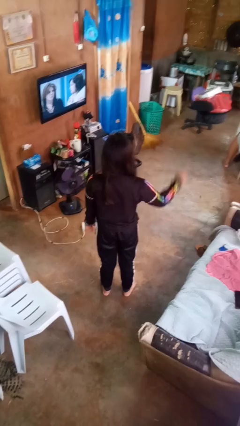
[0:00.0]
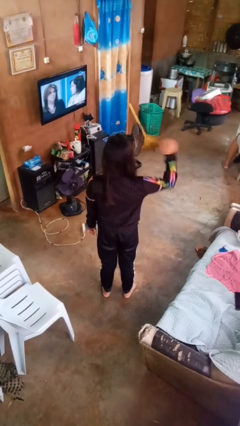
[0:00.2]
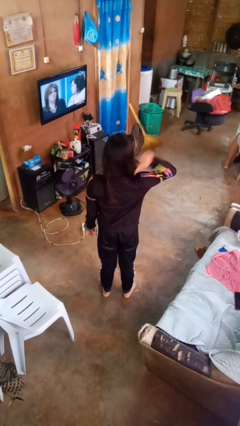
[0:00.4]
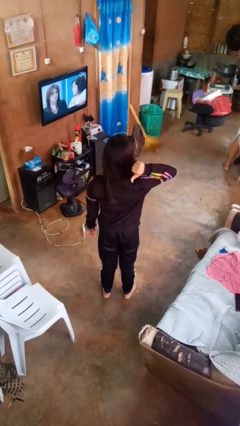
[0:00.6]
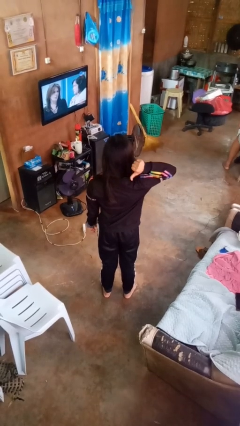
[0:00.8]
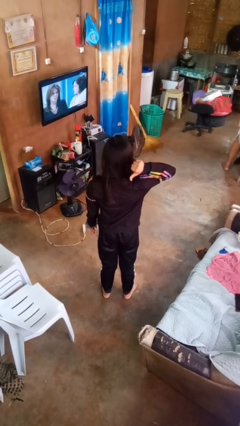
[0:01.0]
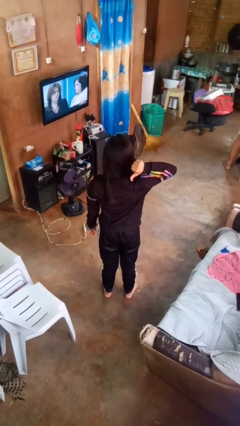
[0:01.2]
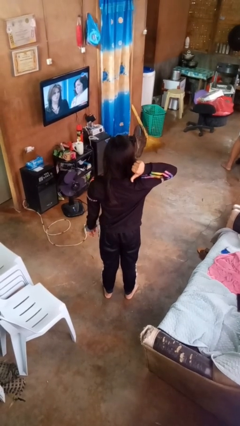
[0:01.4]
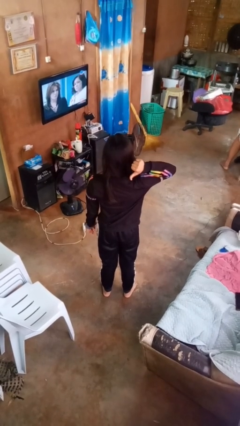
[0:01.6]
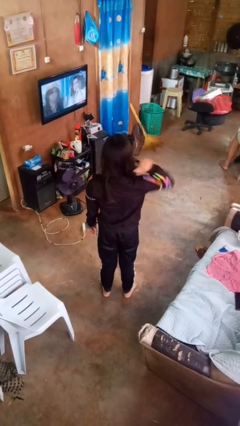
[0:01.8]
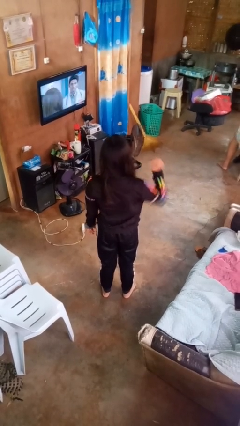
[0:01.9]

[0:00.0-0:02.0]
person gestures behind me

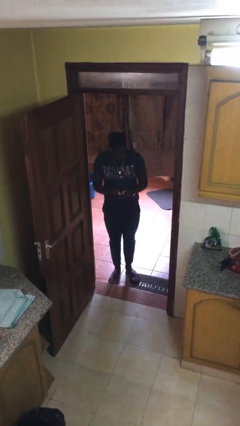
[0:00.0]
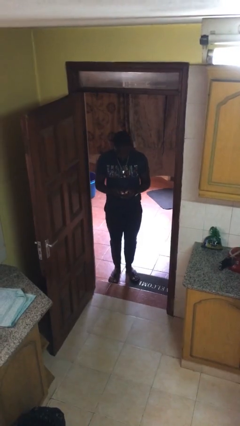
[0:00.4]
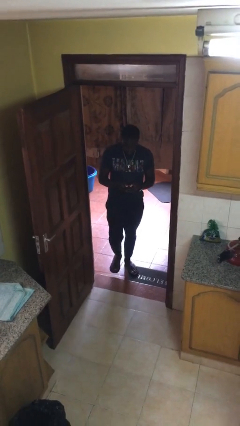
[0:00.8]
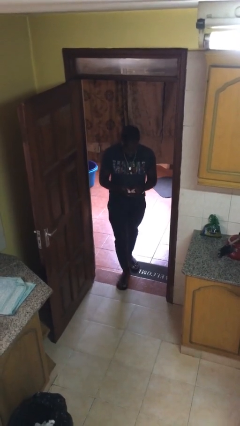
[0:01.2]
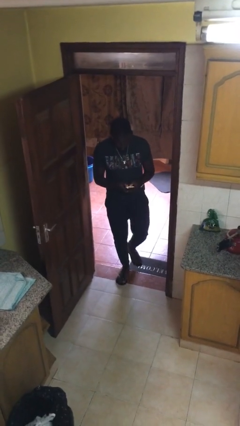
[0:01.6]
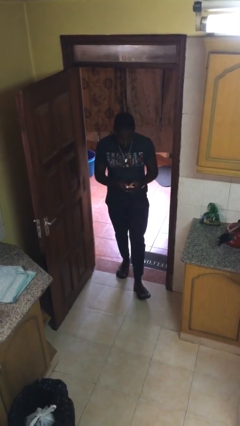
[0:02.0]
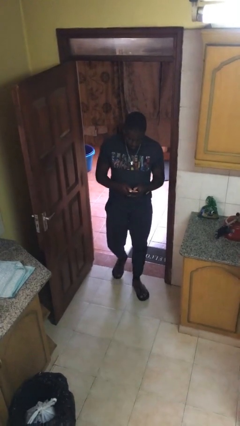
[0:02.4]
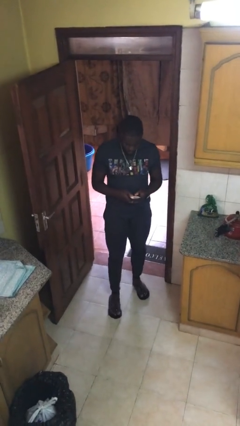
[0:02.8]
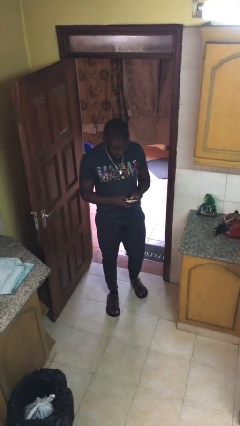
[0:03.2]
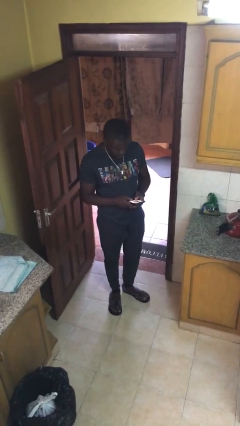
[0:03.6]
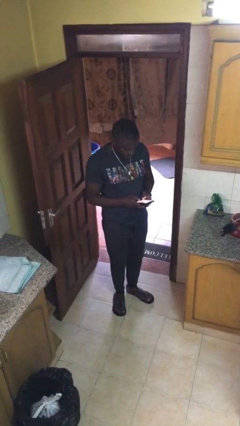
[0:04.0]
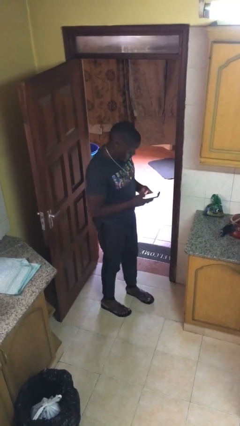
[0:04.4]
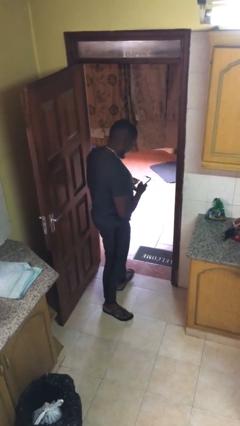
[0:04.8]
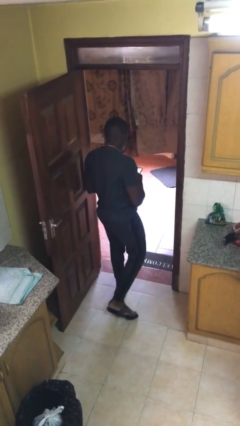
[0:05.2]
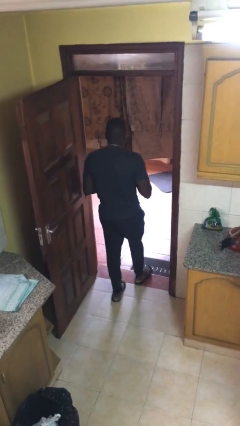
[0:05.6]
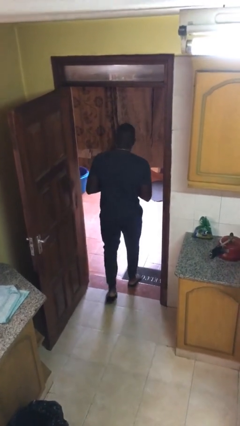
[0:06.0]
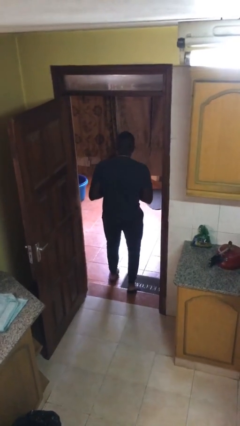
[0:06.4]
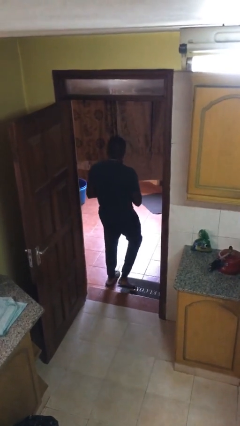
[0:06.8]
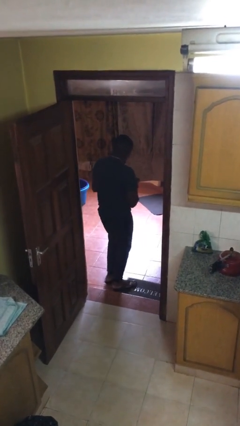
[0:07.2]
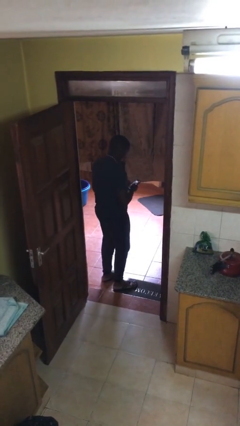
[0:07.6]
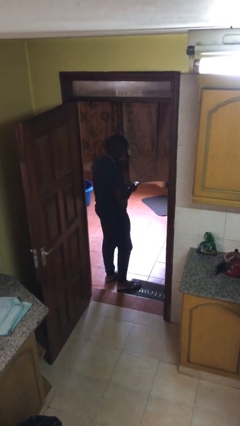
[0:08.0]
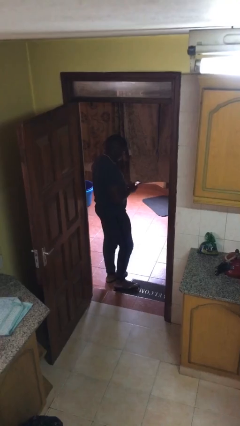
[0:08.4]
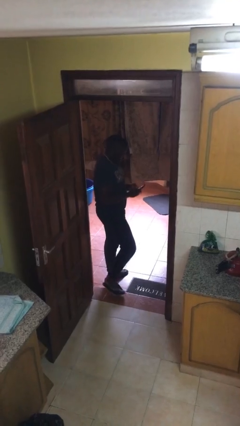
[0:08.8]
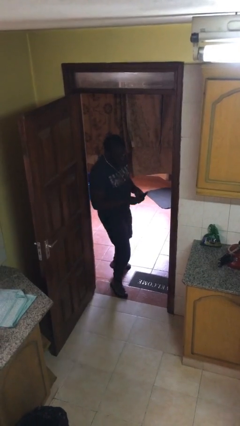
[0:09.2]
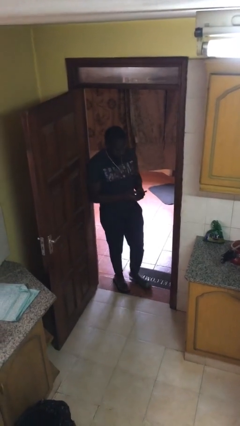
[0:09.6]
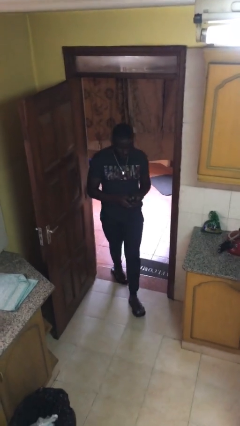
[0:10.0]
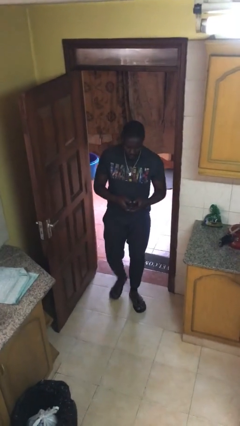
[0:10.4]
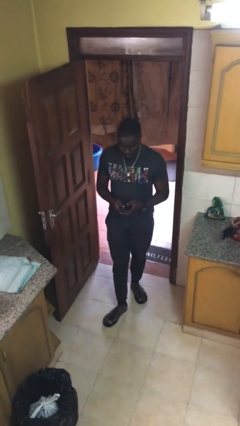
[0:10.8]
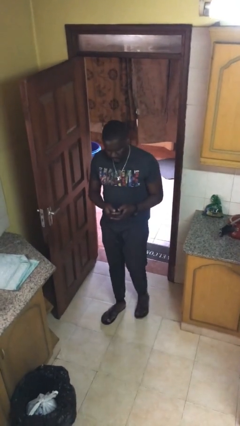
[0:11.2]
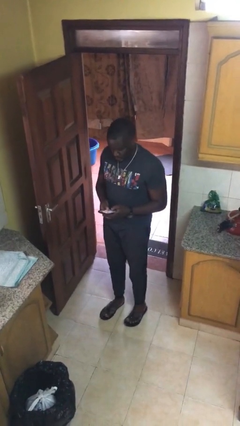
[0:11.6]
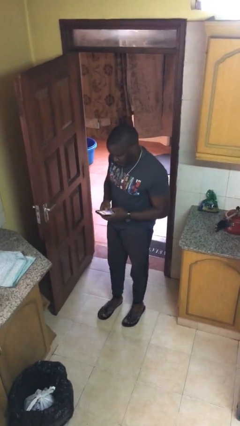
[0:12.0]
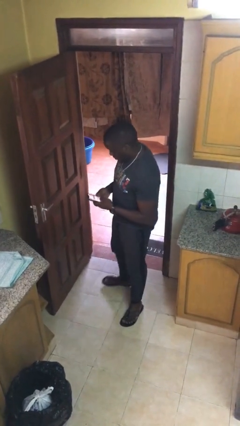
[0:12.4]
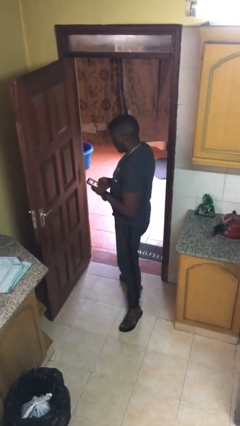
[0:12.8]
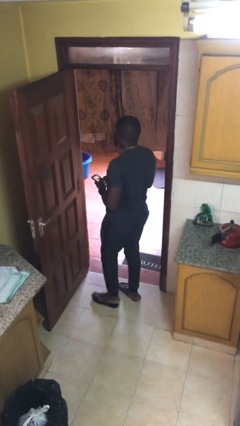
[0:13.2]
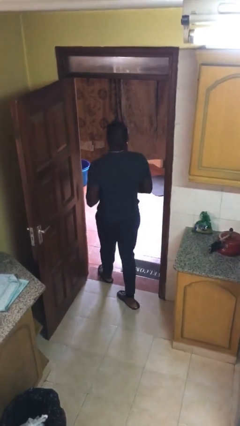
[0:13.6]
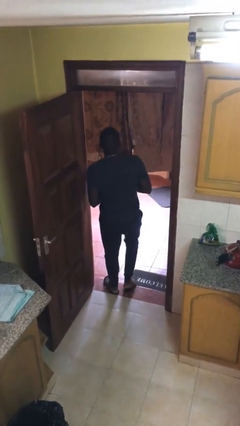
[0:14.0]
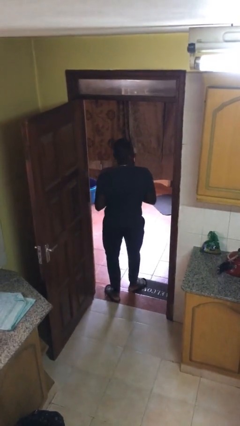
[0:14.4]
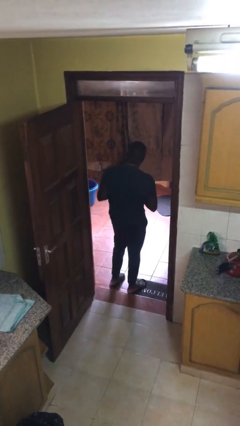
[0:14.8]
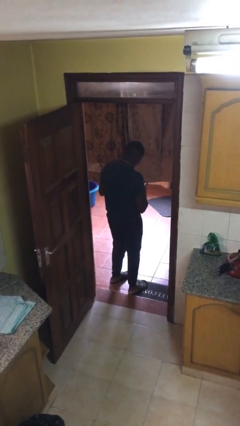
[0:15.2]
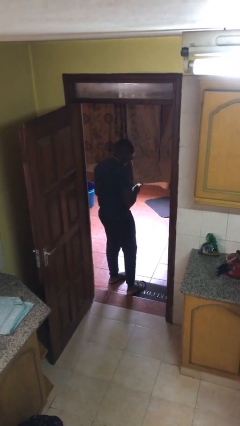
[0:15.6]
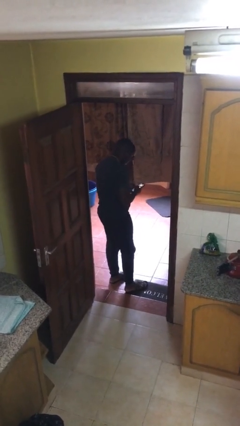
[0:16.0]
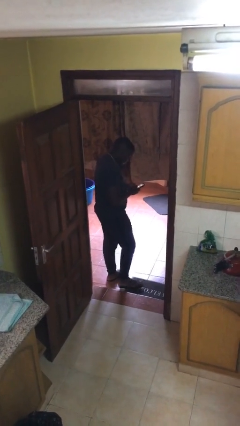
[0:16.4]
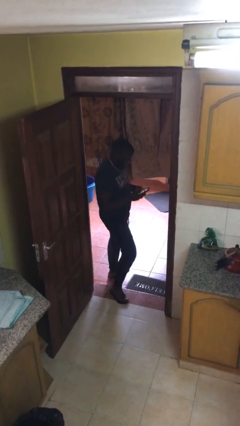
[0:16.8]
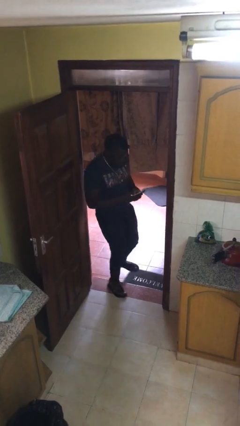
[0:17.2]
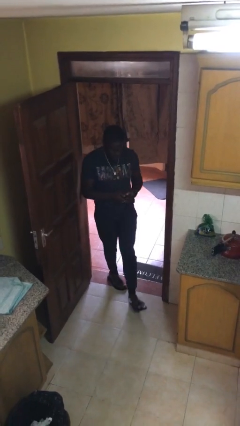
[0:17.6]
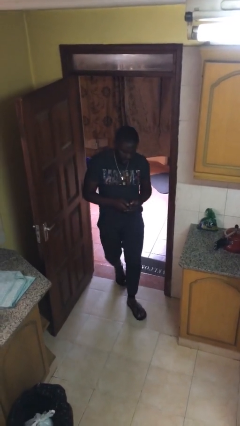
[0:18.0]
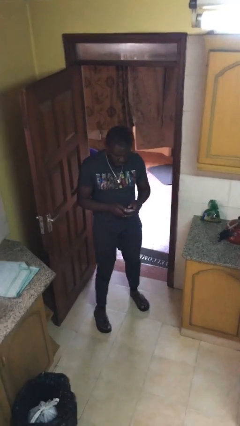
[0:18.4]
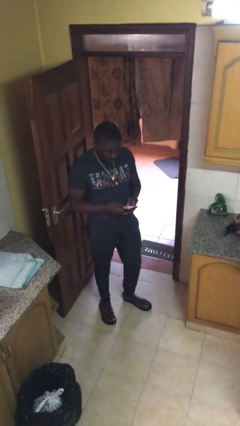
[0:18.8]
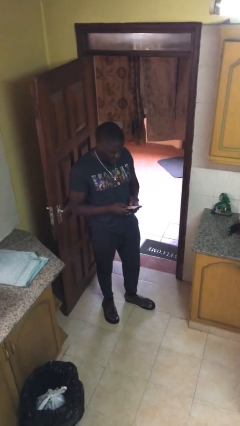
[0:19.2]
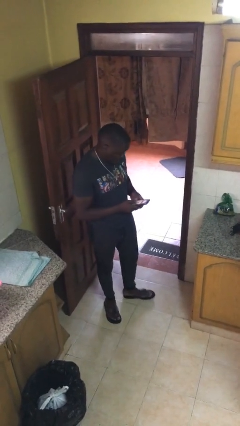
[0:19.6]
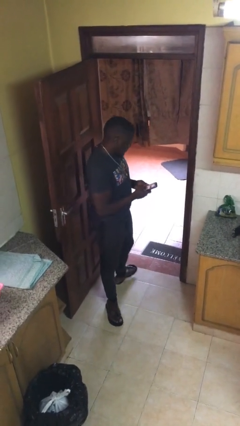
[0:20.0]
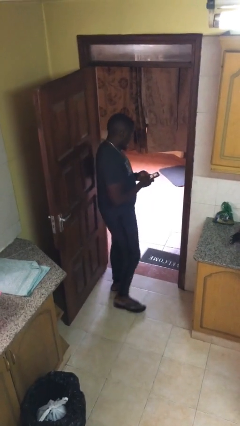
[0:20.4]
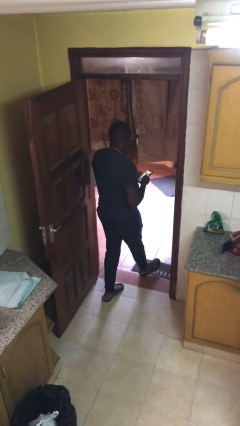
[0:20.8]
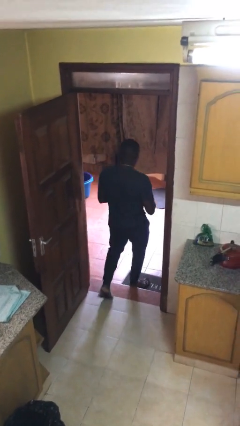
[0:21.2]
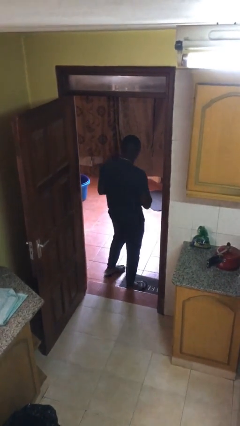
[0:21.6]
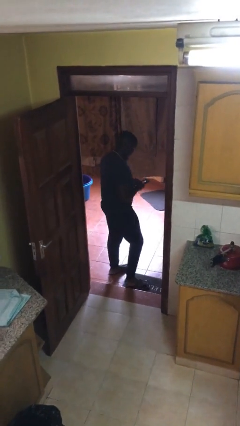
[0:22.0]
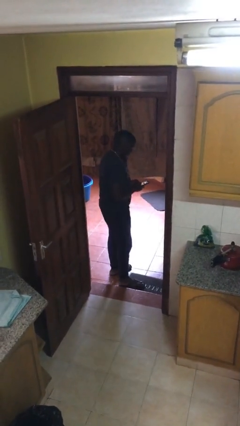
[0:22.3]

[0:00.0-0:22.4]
person texts on phone

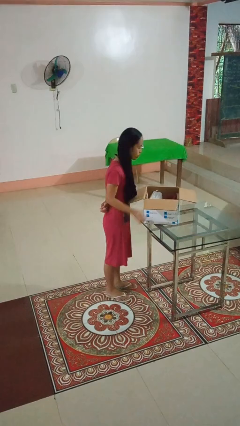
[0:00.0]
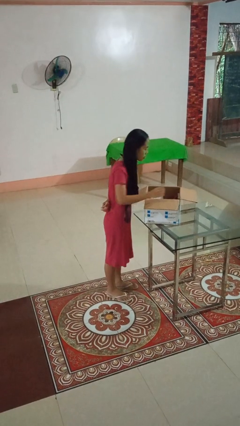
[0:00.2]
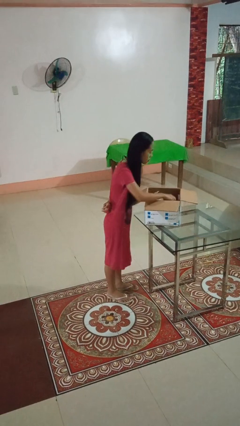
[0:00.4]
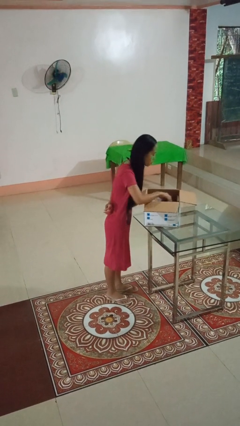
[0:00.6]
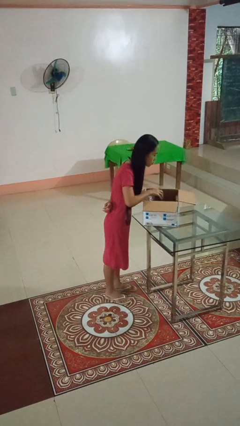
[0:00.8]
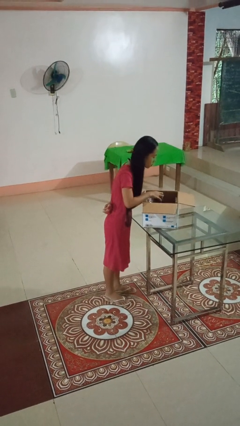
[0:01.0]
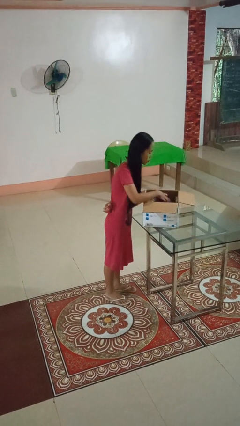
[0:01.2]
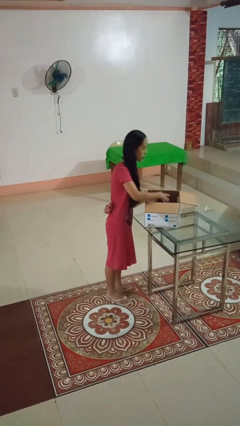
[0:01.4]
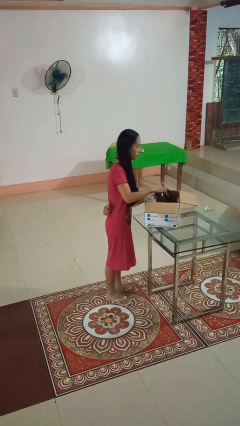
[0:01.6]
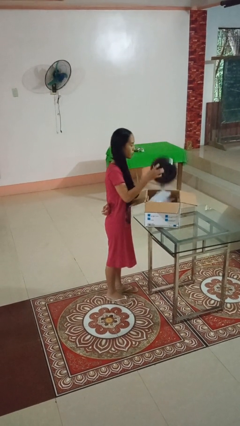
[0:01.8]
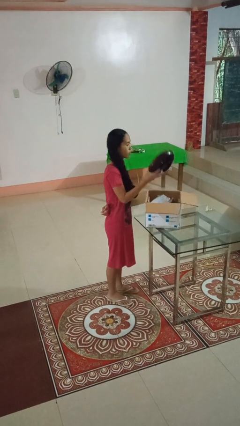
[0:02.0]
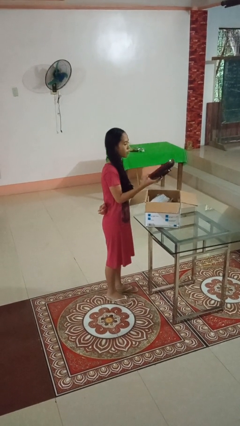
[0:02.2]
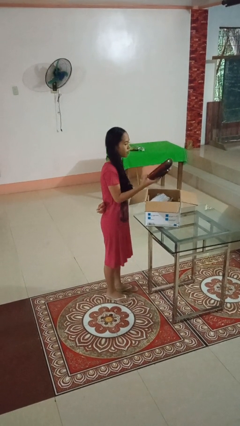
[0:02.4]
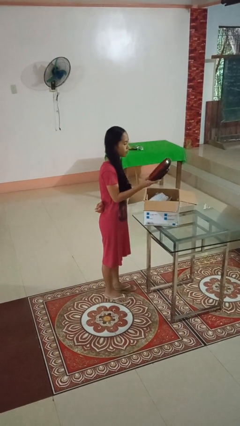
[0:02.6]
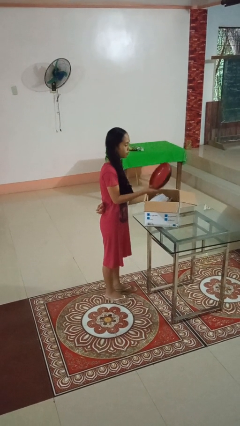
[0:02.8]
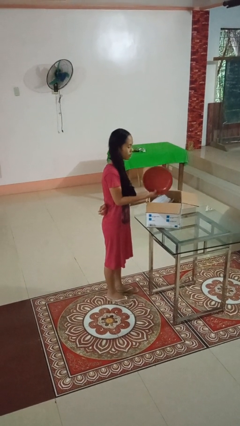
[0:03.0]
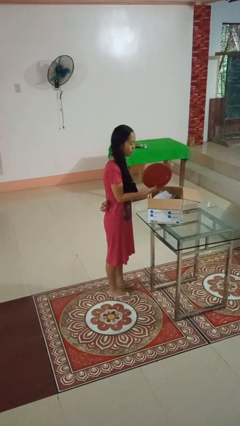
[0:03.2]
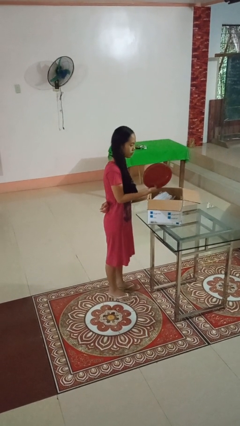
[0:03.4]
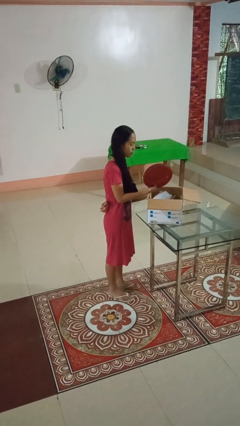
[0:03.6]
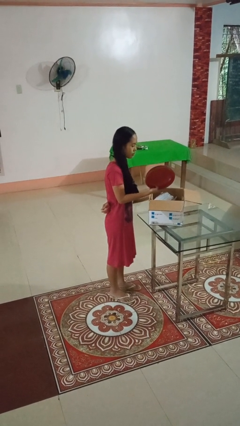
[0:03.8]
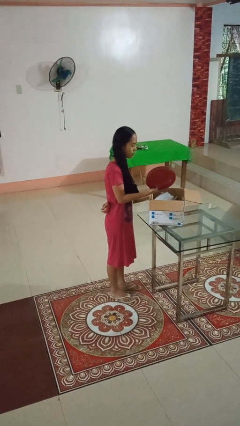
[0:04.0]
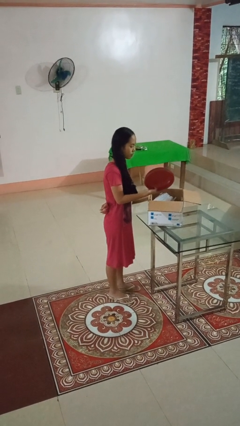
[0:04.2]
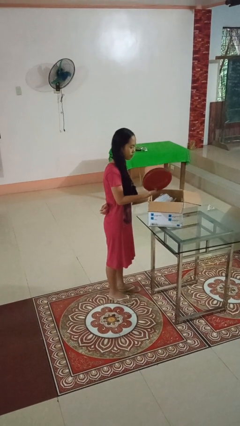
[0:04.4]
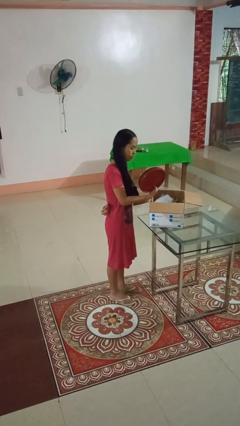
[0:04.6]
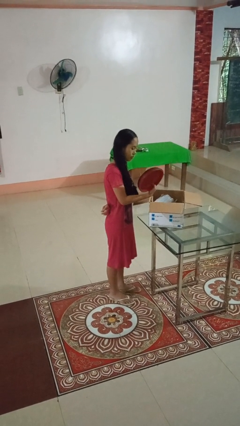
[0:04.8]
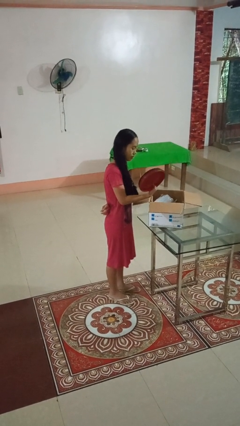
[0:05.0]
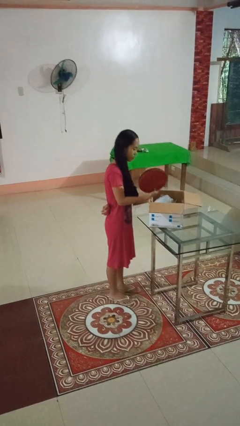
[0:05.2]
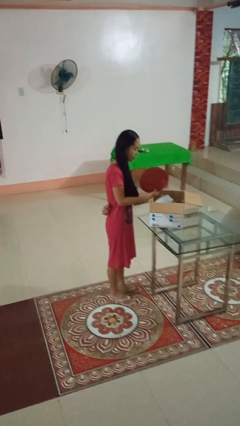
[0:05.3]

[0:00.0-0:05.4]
person takes object from box
